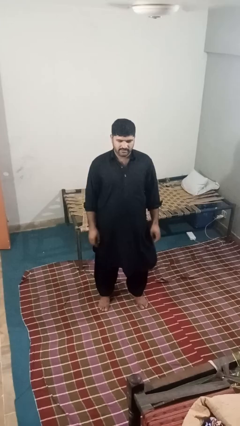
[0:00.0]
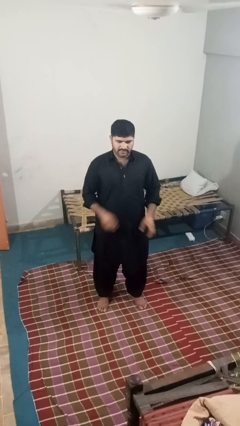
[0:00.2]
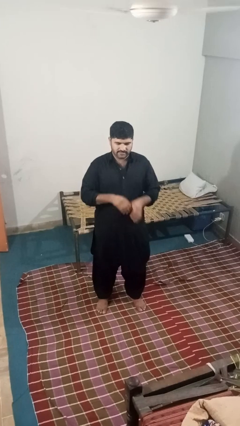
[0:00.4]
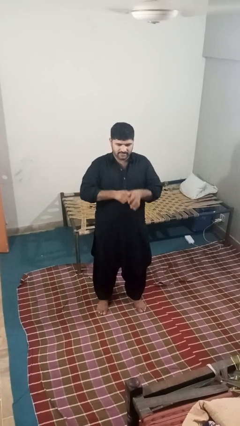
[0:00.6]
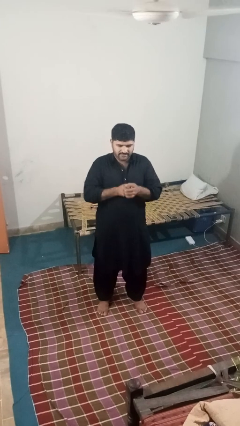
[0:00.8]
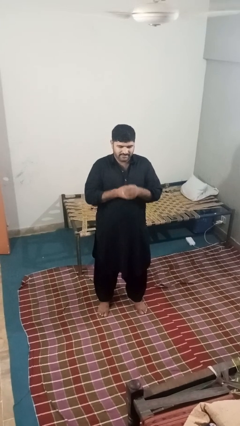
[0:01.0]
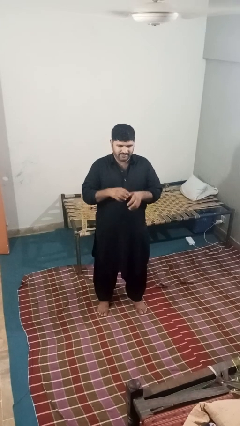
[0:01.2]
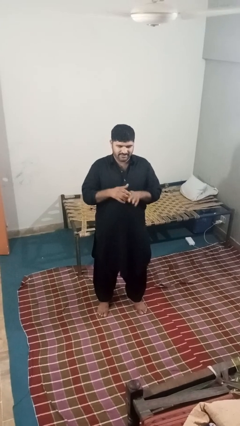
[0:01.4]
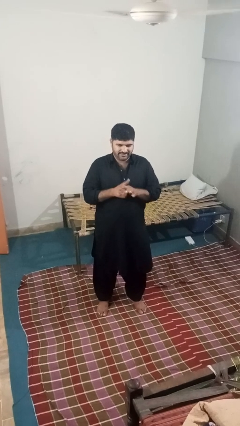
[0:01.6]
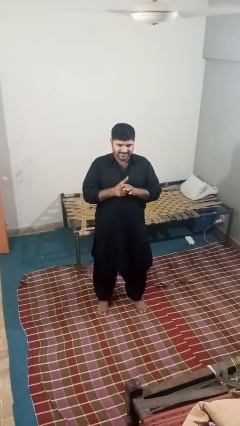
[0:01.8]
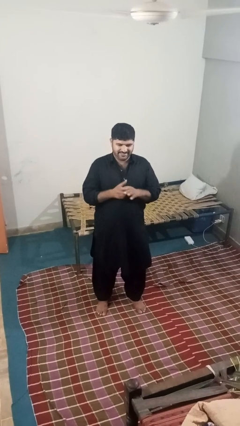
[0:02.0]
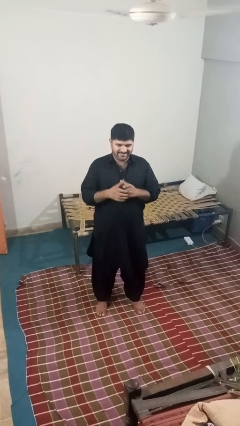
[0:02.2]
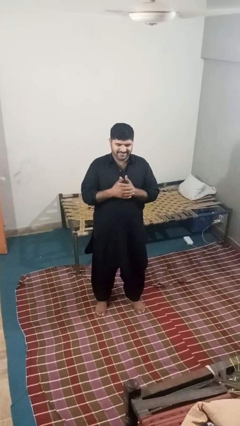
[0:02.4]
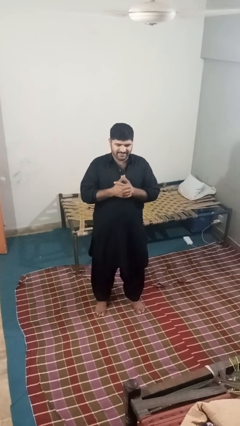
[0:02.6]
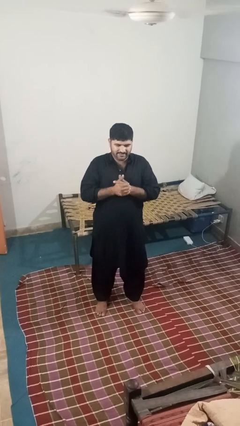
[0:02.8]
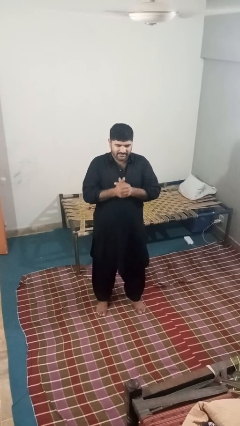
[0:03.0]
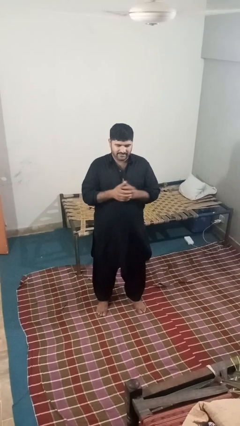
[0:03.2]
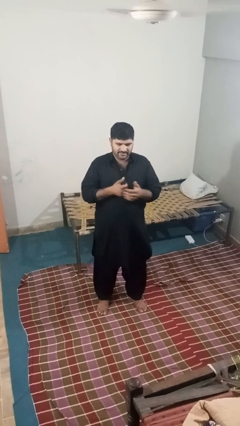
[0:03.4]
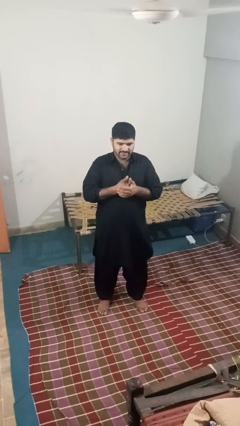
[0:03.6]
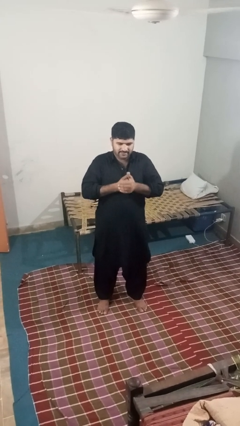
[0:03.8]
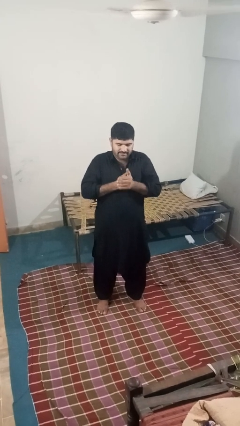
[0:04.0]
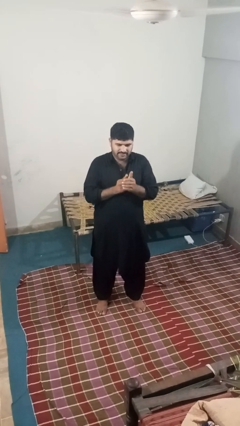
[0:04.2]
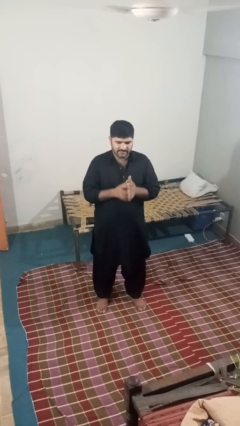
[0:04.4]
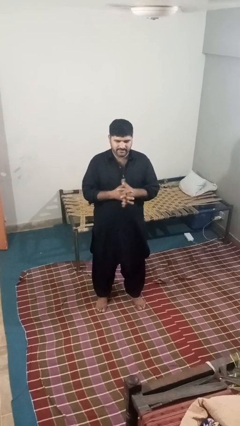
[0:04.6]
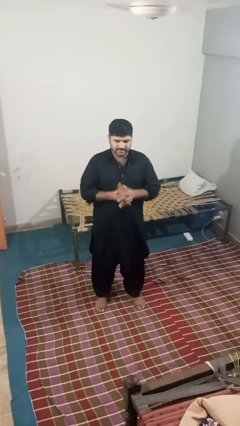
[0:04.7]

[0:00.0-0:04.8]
person cracks knuckles

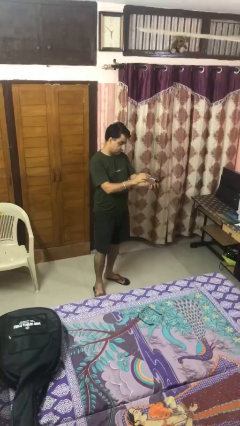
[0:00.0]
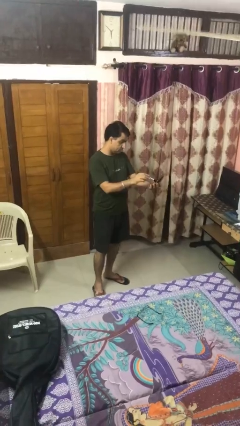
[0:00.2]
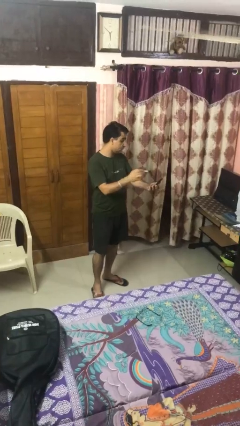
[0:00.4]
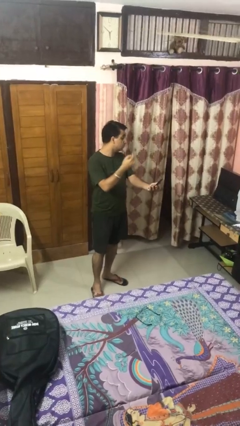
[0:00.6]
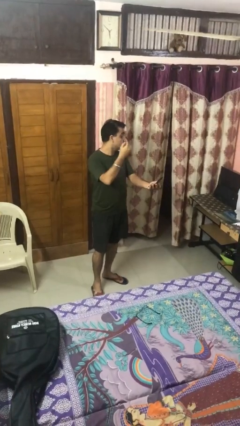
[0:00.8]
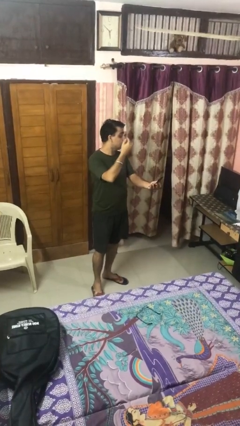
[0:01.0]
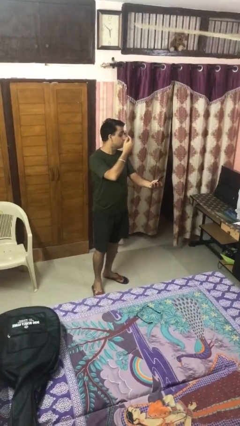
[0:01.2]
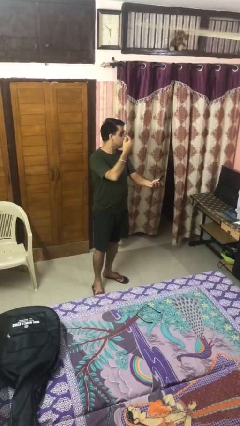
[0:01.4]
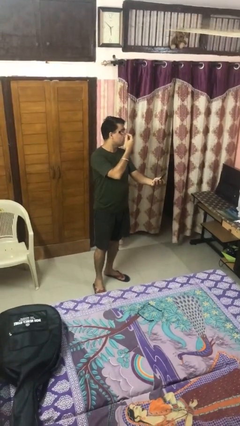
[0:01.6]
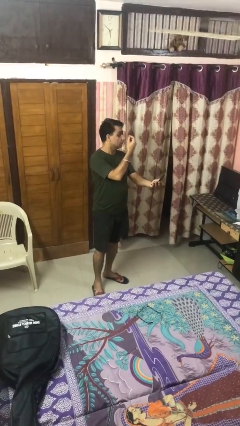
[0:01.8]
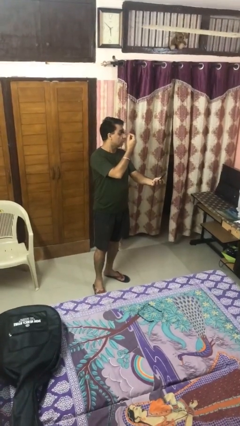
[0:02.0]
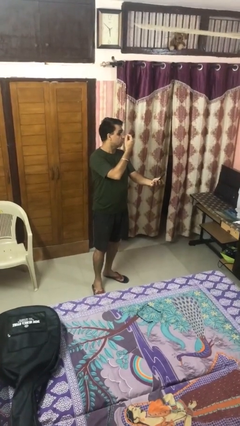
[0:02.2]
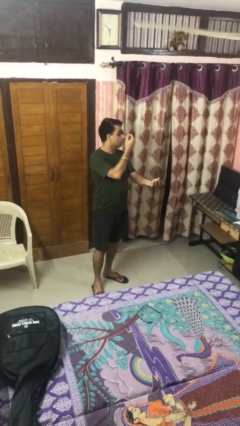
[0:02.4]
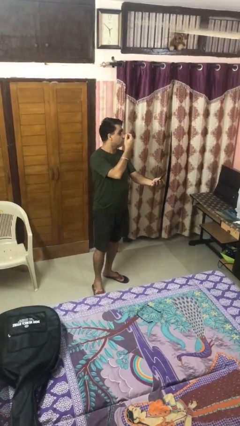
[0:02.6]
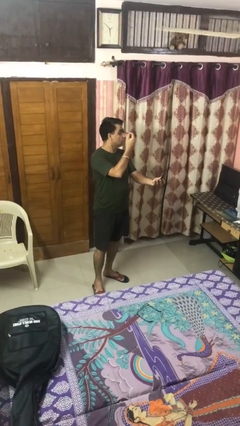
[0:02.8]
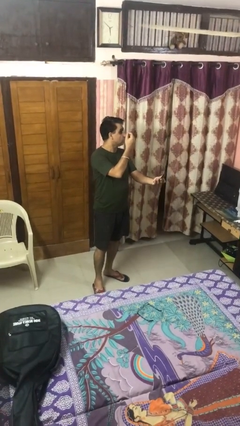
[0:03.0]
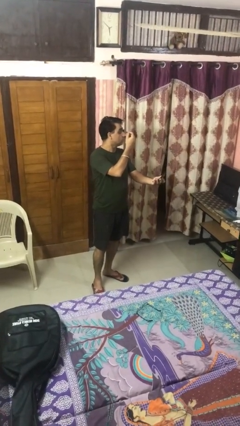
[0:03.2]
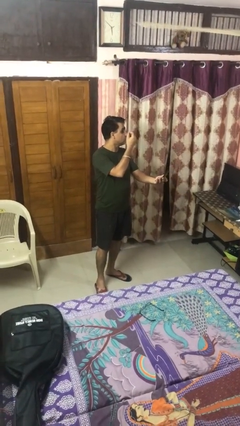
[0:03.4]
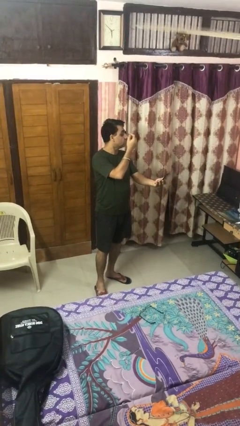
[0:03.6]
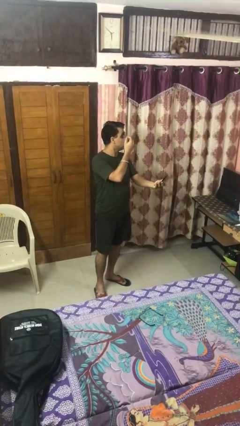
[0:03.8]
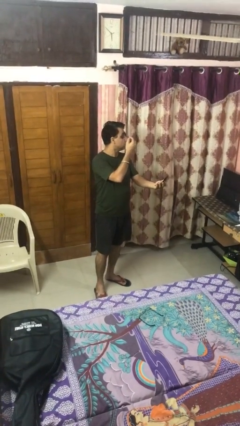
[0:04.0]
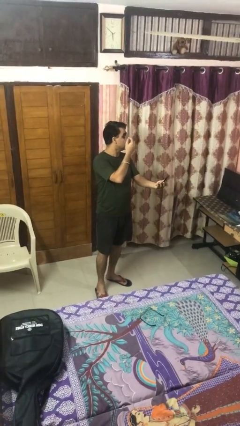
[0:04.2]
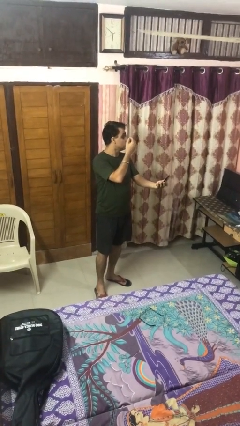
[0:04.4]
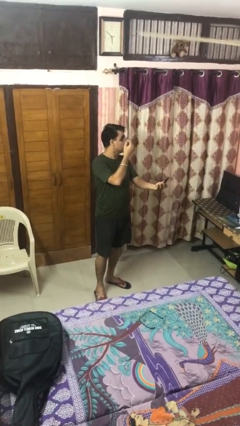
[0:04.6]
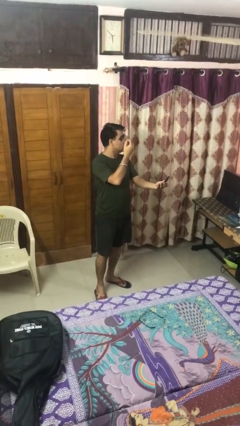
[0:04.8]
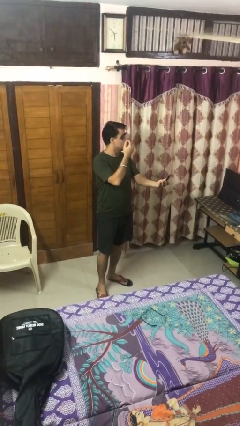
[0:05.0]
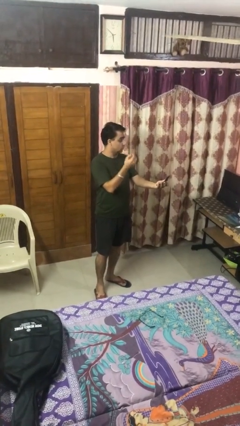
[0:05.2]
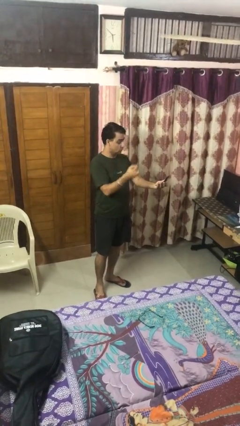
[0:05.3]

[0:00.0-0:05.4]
person applies eye makeup

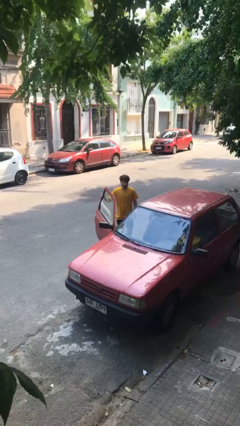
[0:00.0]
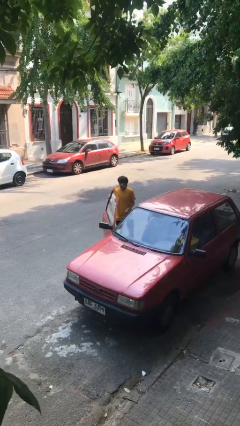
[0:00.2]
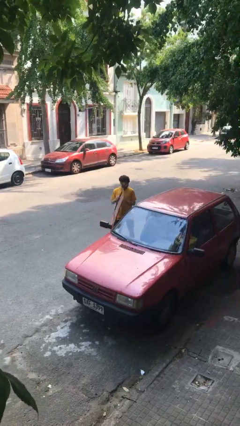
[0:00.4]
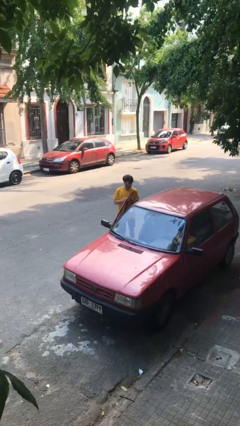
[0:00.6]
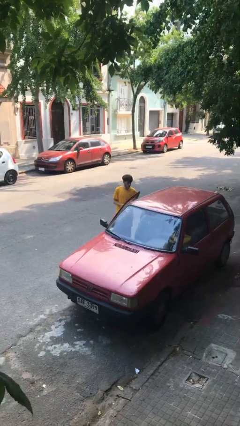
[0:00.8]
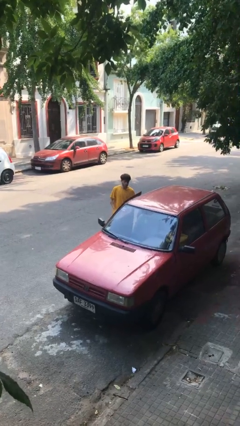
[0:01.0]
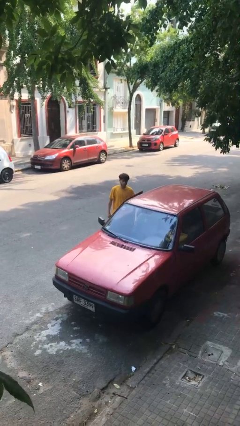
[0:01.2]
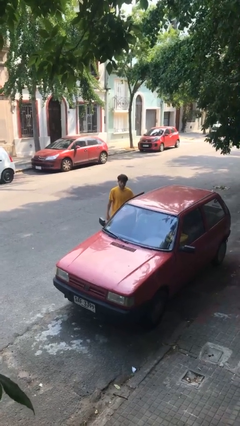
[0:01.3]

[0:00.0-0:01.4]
person closes car door

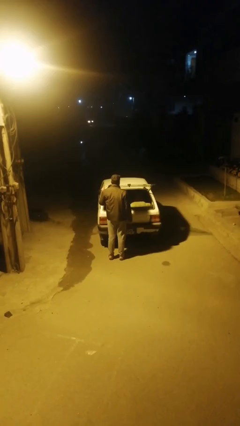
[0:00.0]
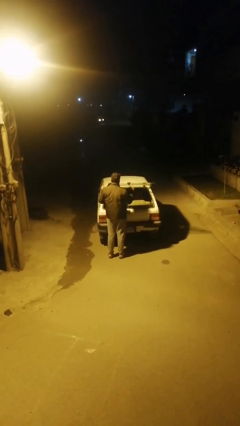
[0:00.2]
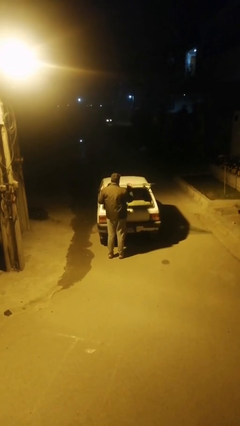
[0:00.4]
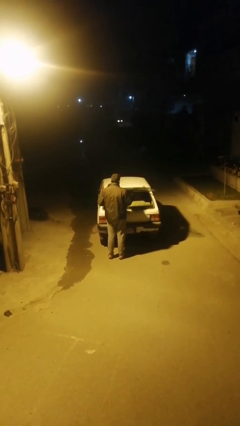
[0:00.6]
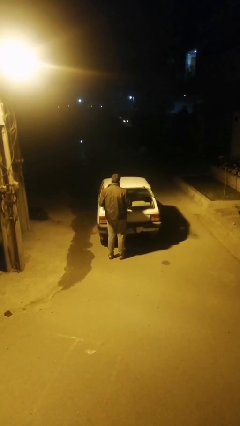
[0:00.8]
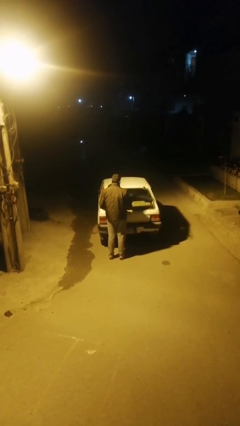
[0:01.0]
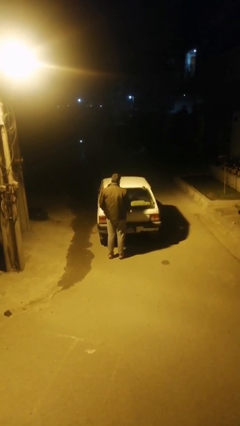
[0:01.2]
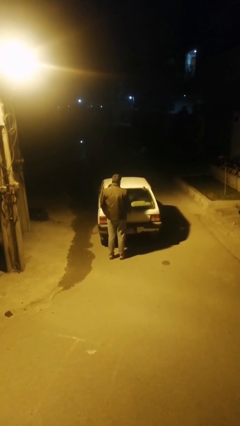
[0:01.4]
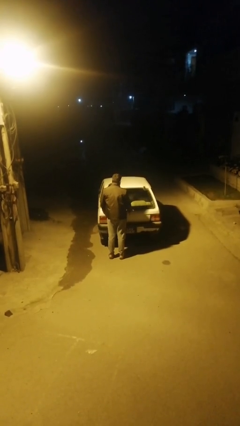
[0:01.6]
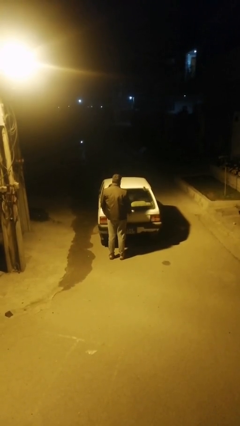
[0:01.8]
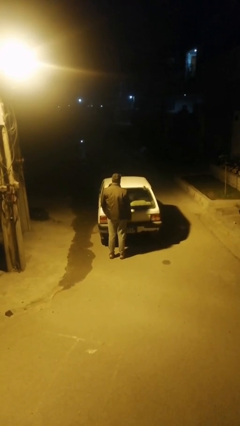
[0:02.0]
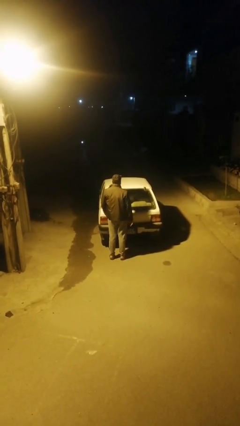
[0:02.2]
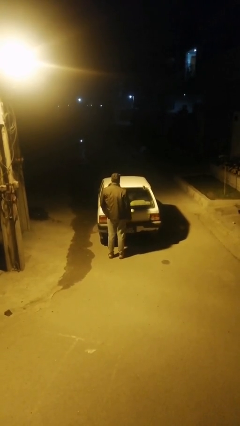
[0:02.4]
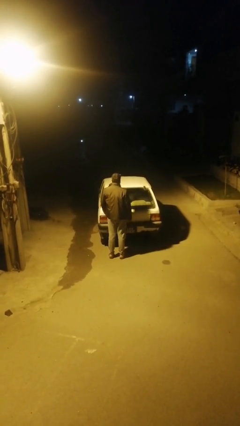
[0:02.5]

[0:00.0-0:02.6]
person closes car trunk

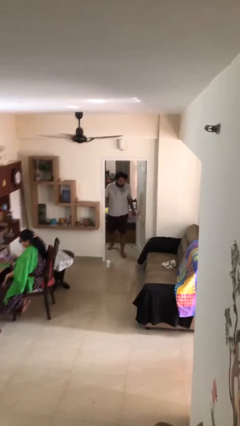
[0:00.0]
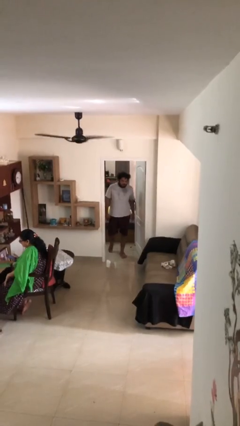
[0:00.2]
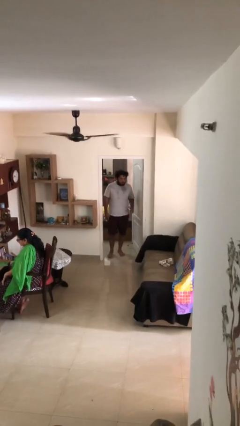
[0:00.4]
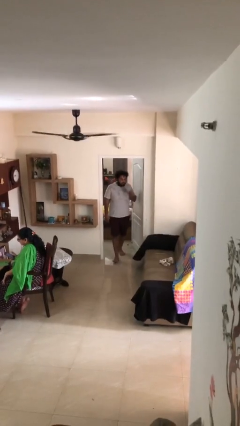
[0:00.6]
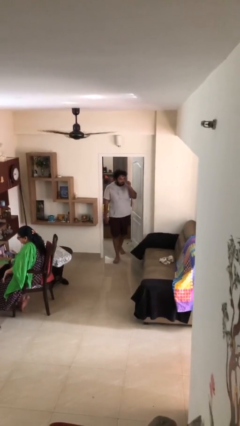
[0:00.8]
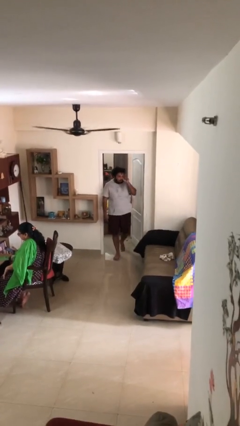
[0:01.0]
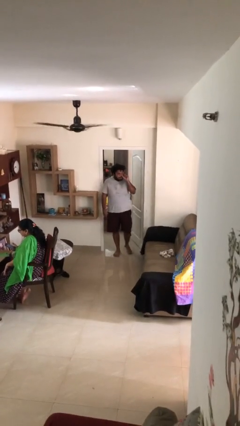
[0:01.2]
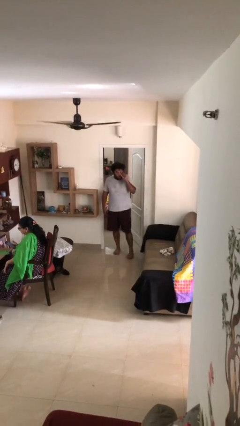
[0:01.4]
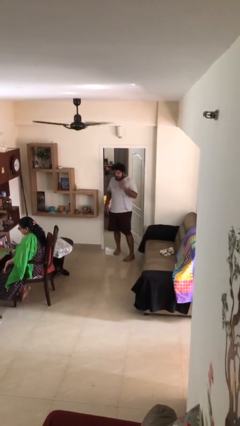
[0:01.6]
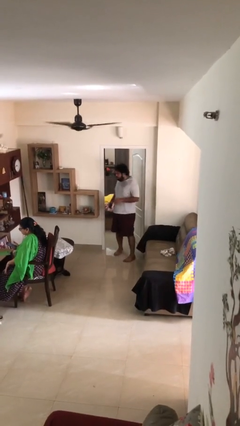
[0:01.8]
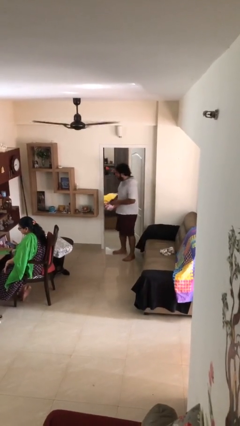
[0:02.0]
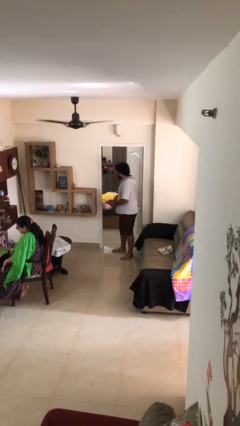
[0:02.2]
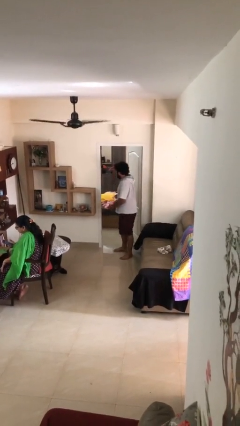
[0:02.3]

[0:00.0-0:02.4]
person enters scene through structure

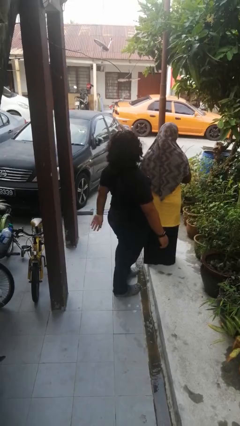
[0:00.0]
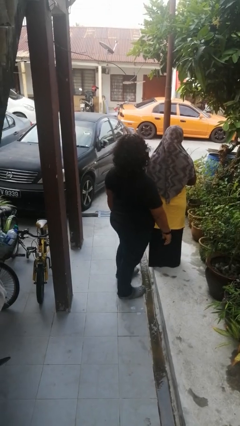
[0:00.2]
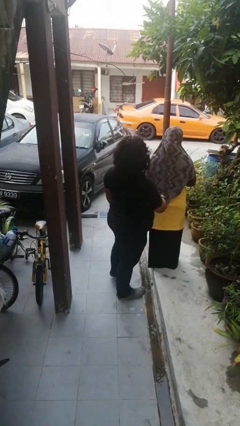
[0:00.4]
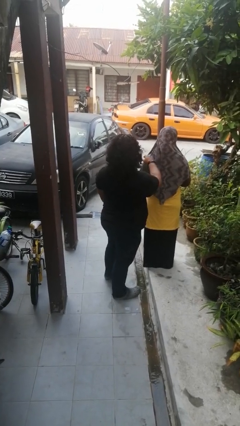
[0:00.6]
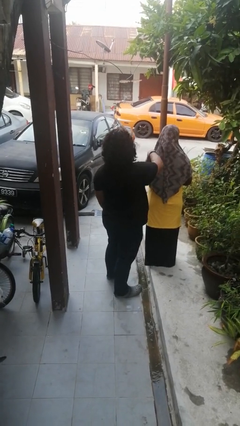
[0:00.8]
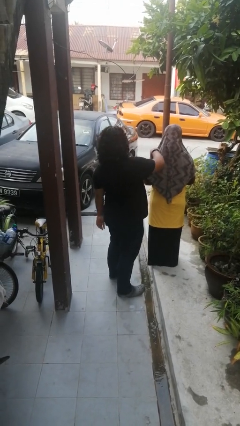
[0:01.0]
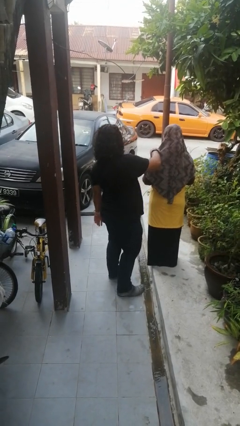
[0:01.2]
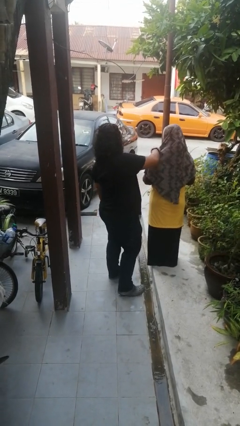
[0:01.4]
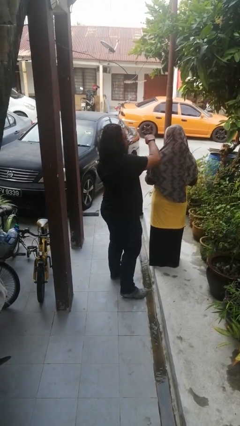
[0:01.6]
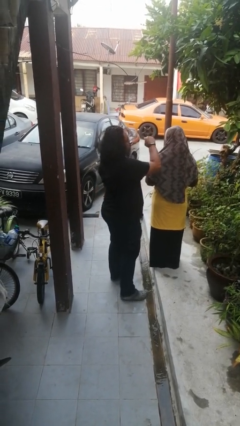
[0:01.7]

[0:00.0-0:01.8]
person touches back of person
